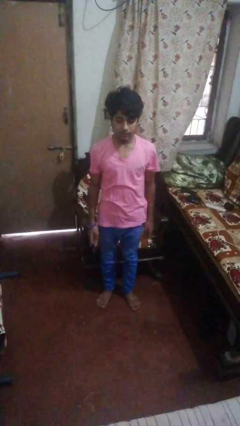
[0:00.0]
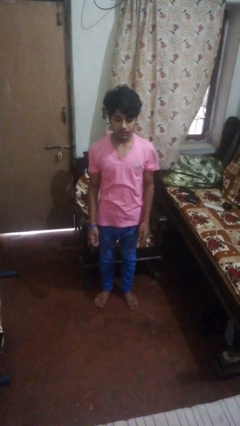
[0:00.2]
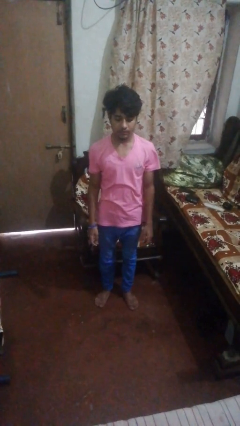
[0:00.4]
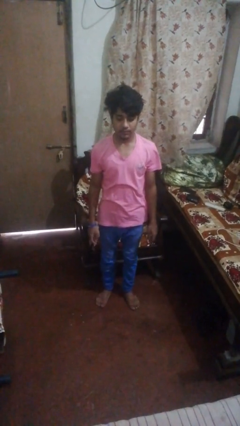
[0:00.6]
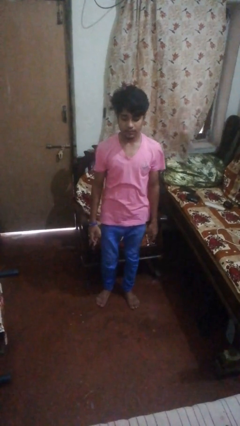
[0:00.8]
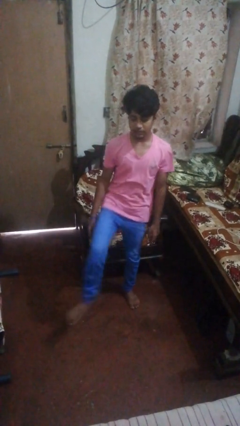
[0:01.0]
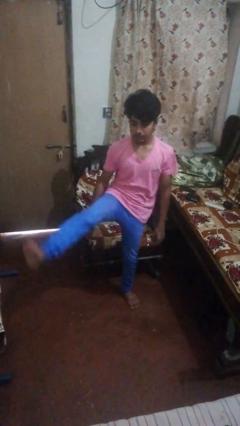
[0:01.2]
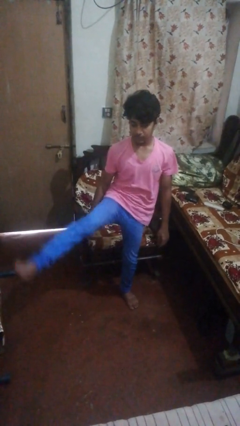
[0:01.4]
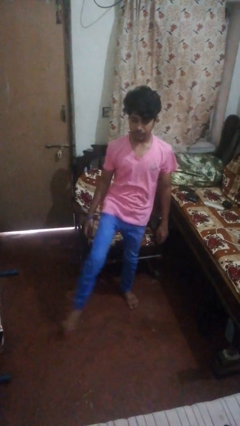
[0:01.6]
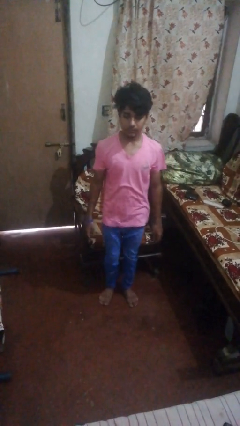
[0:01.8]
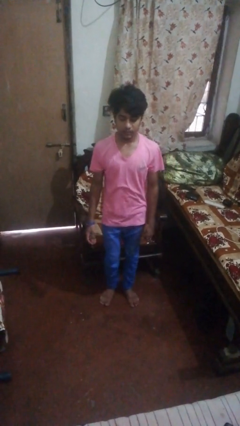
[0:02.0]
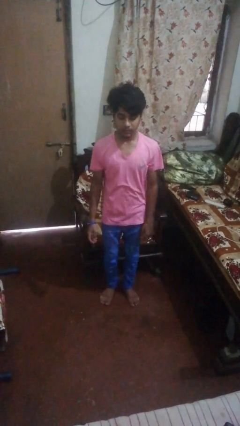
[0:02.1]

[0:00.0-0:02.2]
person karate kicks

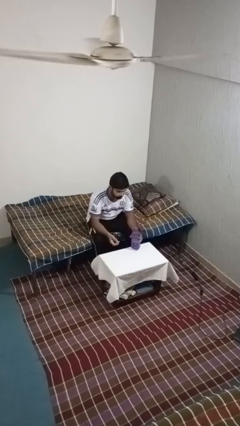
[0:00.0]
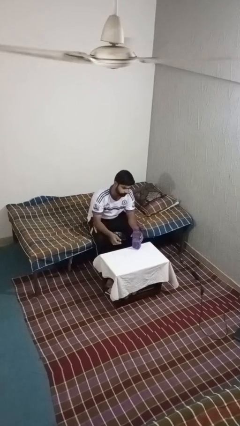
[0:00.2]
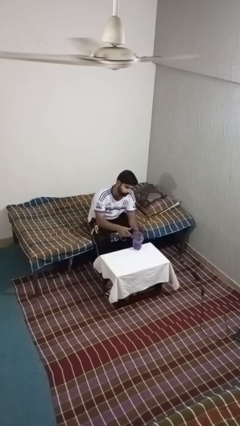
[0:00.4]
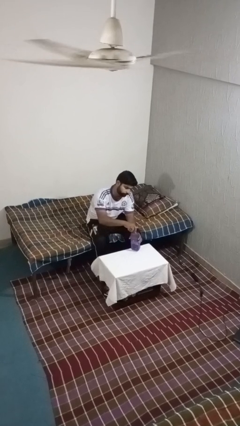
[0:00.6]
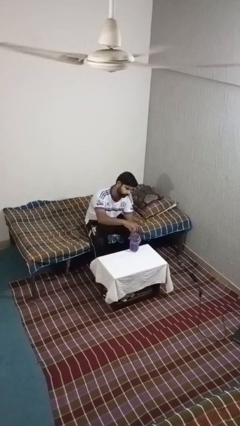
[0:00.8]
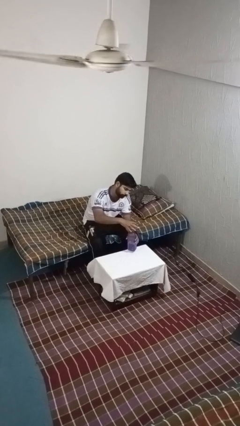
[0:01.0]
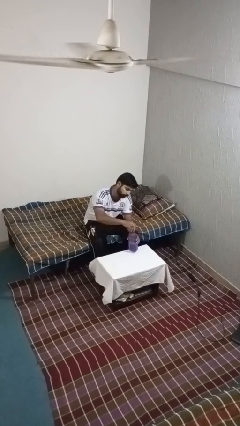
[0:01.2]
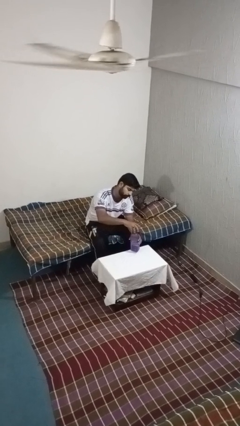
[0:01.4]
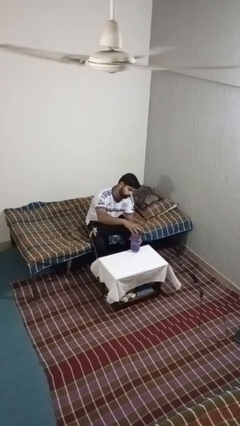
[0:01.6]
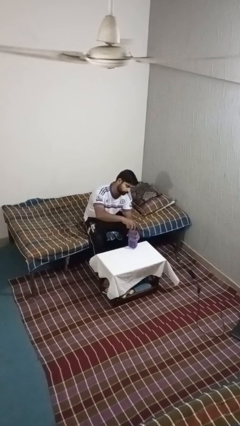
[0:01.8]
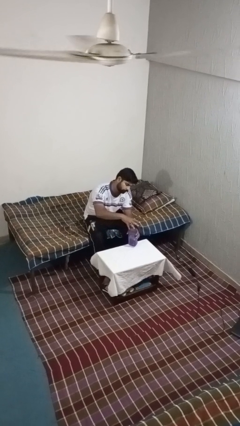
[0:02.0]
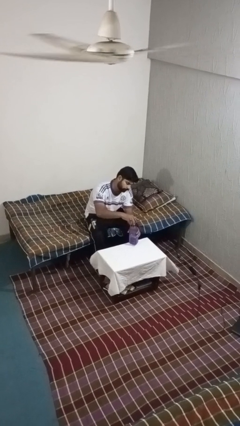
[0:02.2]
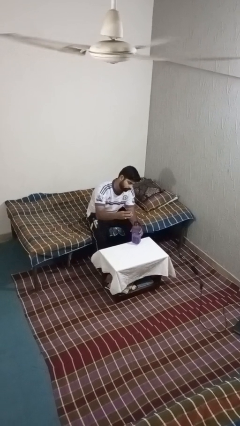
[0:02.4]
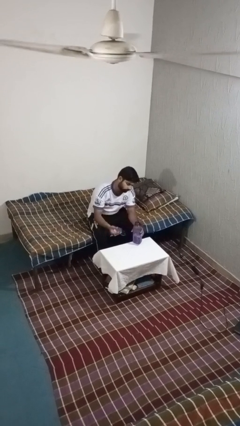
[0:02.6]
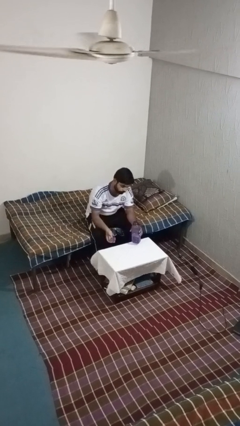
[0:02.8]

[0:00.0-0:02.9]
person unscrews lid from bottle

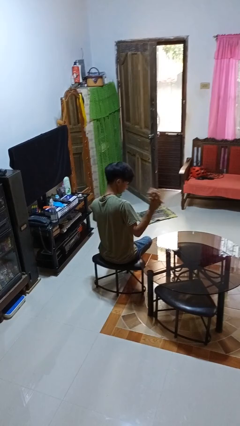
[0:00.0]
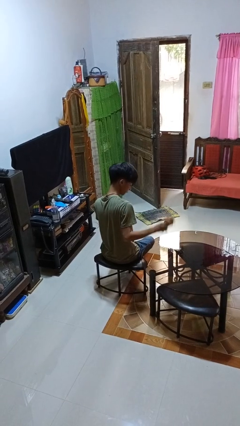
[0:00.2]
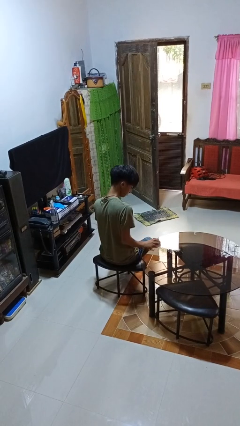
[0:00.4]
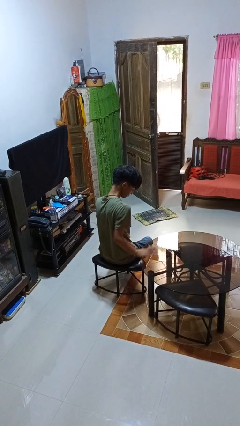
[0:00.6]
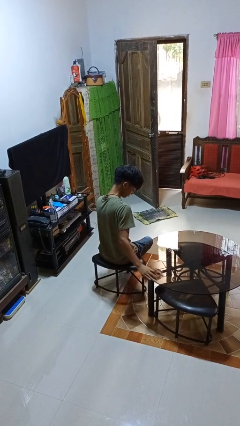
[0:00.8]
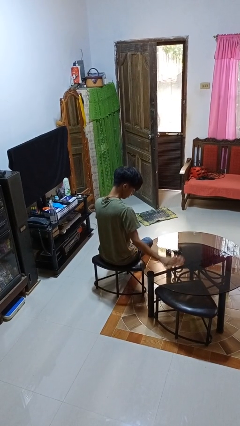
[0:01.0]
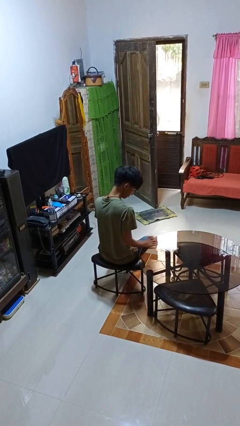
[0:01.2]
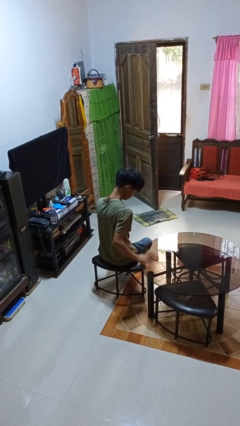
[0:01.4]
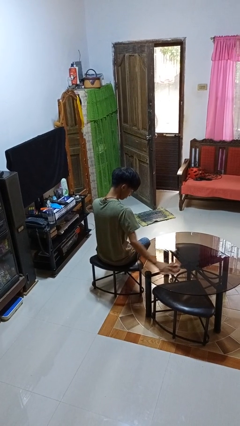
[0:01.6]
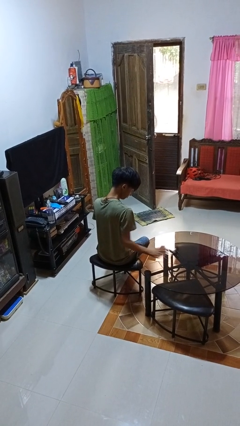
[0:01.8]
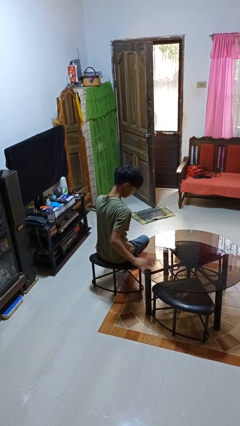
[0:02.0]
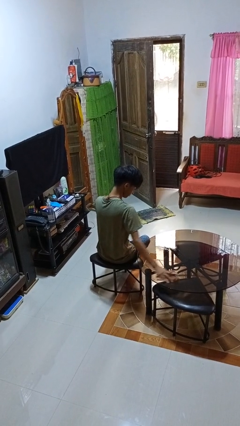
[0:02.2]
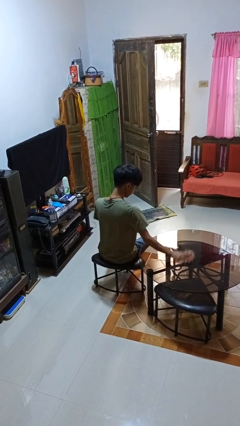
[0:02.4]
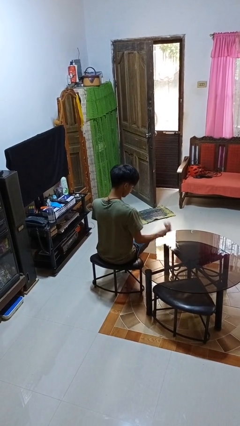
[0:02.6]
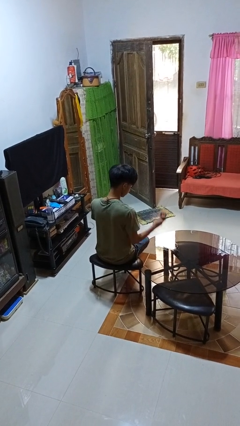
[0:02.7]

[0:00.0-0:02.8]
person cleans table with rag

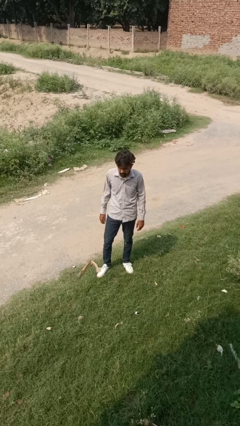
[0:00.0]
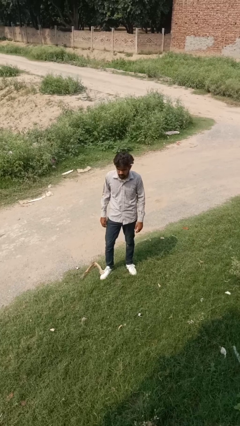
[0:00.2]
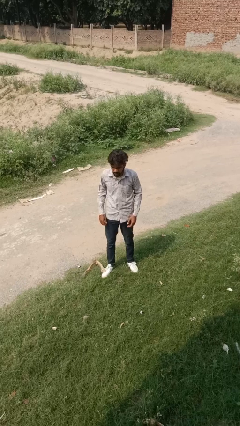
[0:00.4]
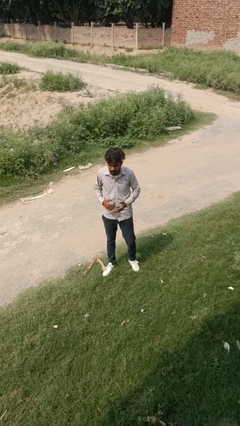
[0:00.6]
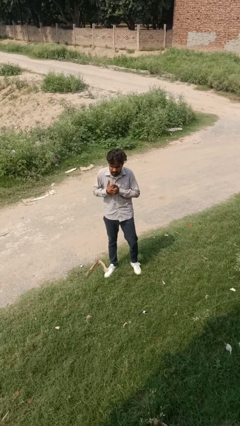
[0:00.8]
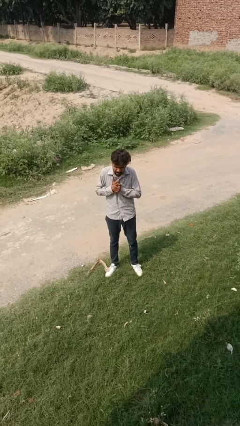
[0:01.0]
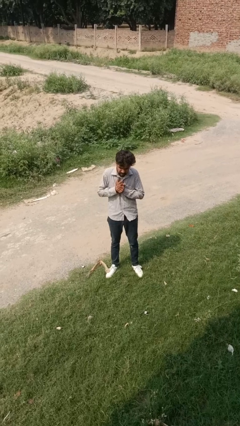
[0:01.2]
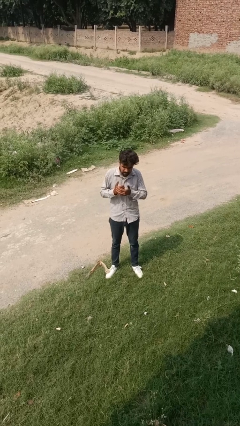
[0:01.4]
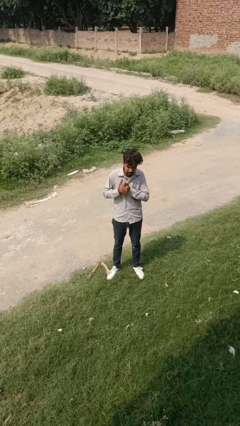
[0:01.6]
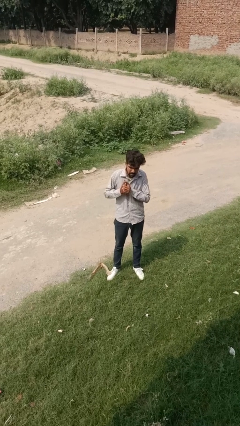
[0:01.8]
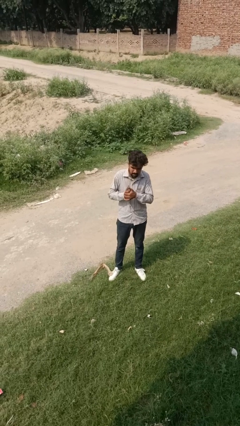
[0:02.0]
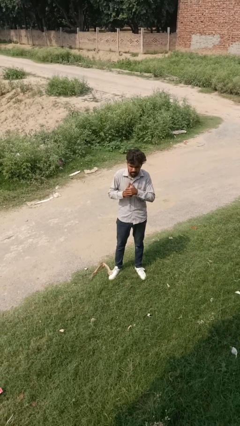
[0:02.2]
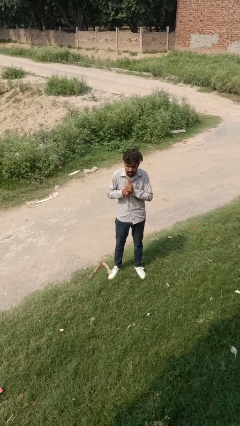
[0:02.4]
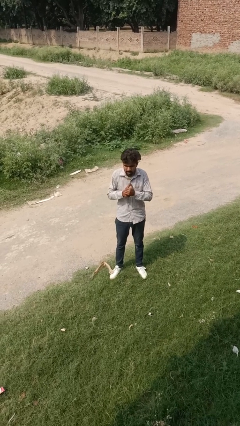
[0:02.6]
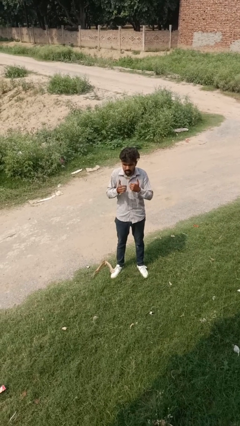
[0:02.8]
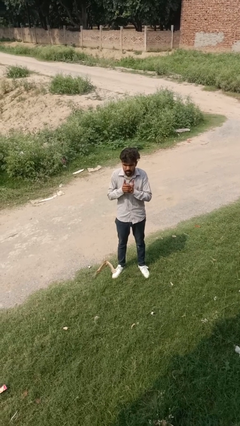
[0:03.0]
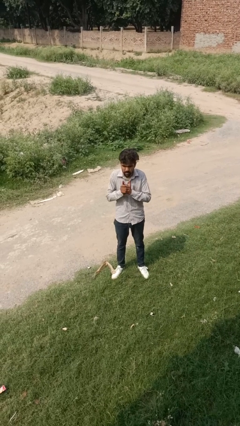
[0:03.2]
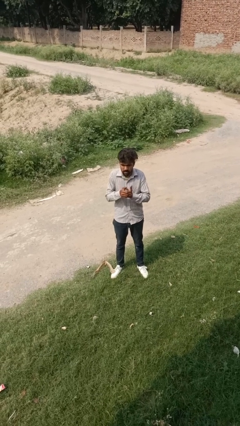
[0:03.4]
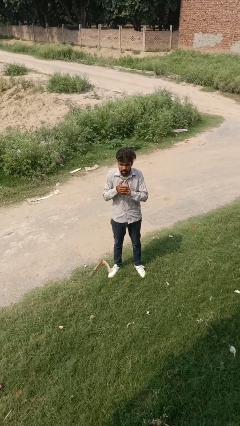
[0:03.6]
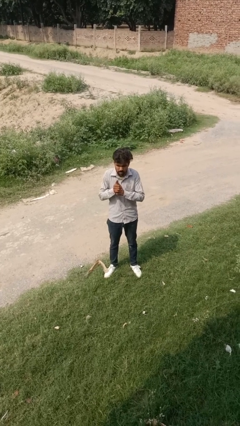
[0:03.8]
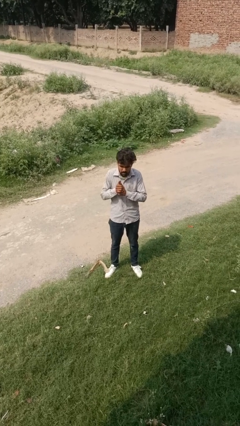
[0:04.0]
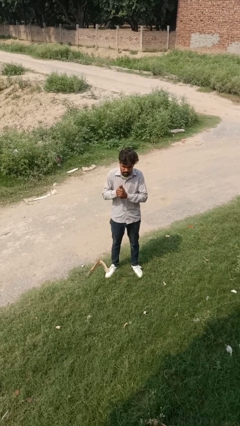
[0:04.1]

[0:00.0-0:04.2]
person cracks knuckles

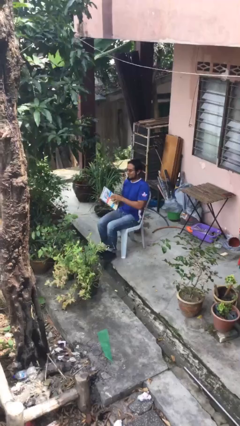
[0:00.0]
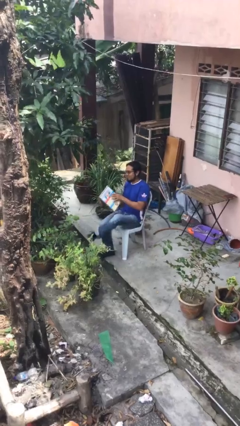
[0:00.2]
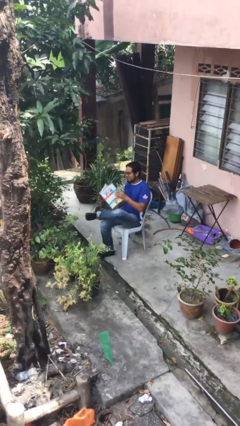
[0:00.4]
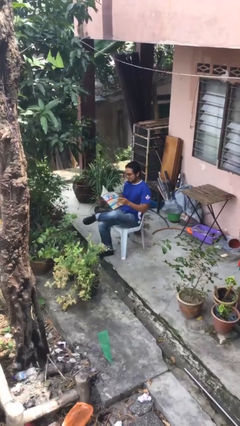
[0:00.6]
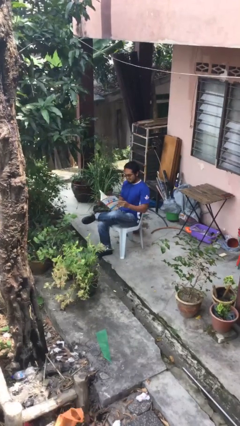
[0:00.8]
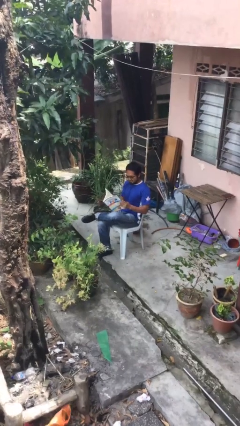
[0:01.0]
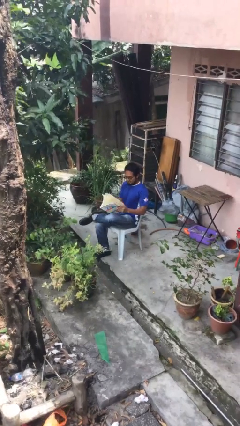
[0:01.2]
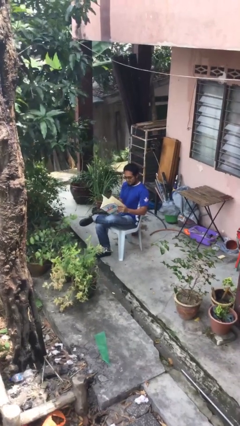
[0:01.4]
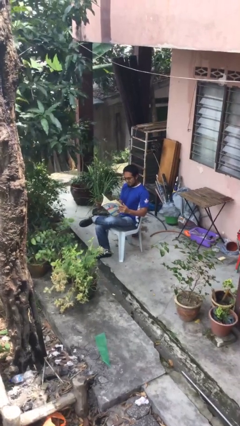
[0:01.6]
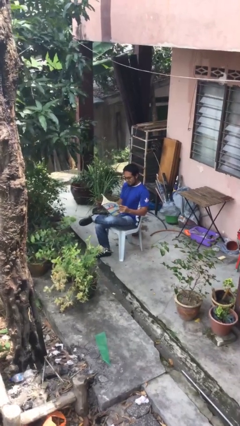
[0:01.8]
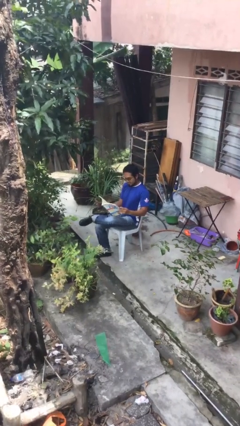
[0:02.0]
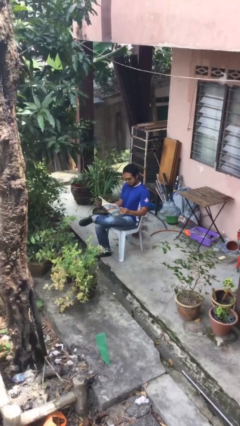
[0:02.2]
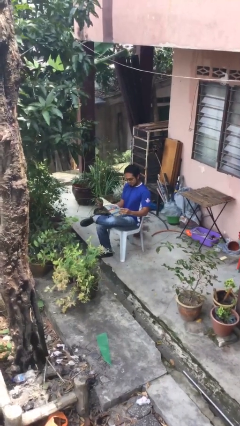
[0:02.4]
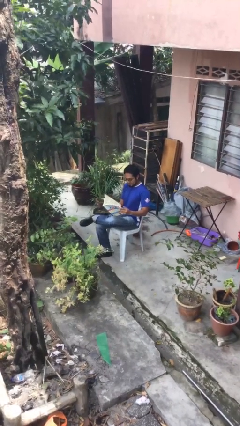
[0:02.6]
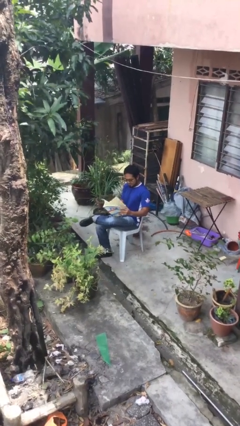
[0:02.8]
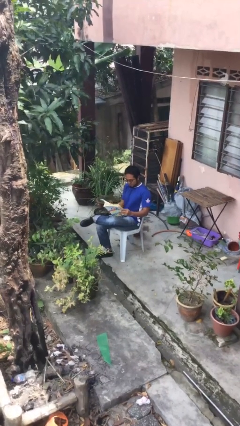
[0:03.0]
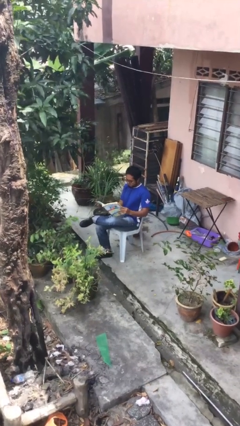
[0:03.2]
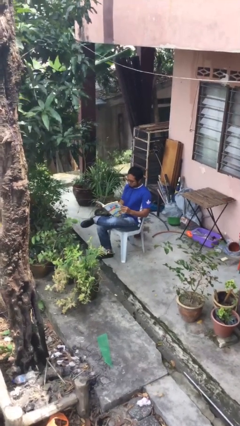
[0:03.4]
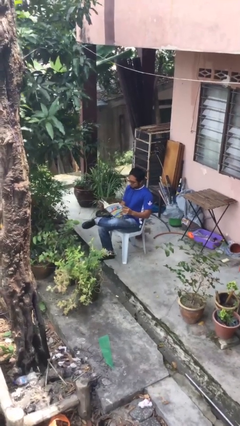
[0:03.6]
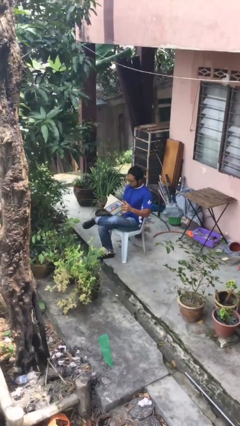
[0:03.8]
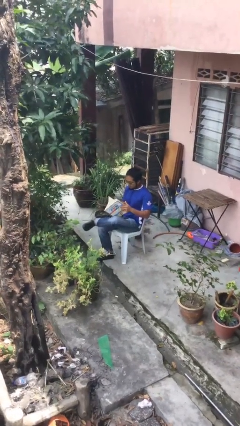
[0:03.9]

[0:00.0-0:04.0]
person reads document

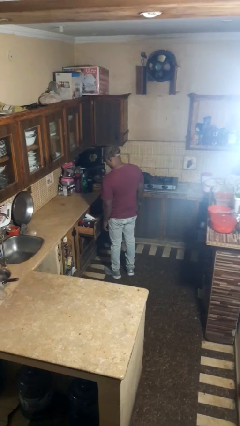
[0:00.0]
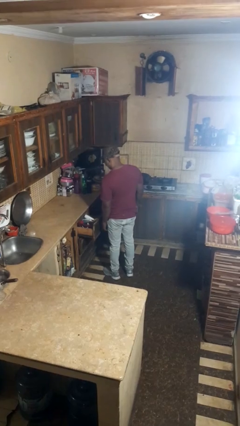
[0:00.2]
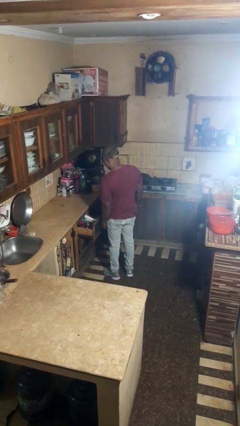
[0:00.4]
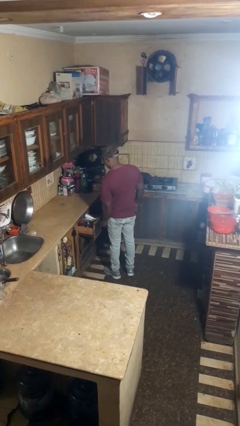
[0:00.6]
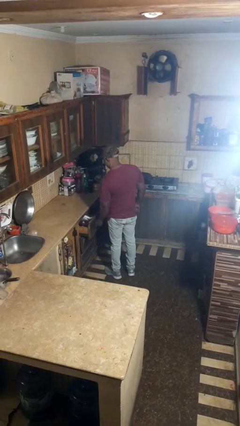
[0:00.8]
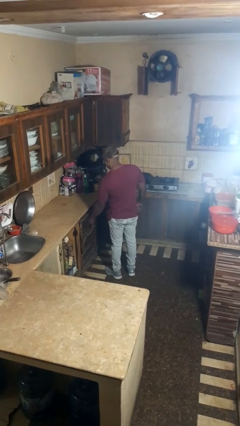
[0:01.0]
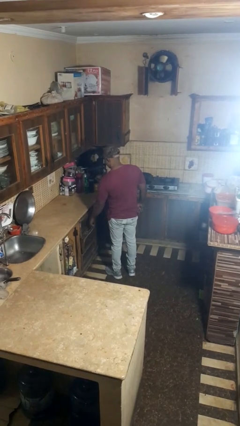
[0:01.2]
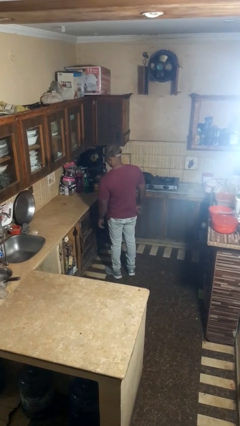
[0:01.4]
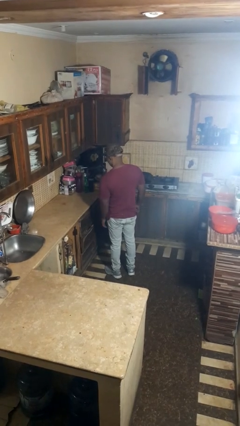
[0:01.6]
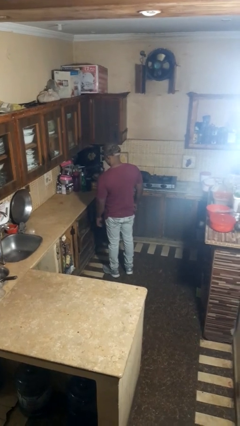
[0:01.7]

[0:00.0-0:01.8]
person closes kitchen drawer
